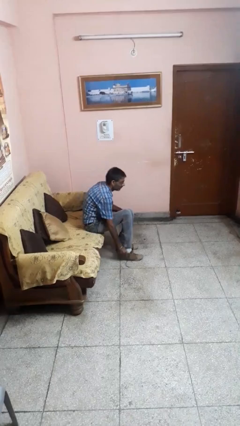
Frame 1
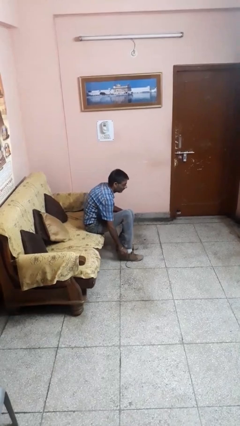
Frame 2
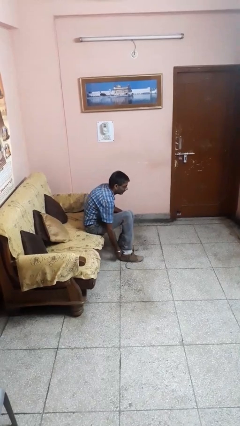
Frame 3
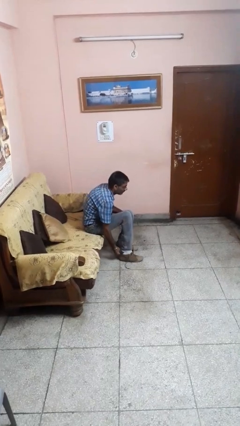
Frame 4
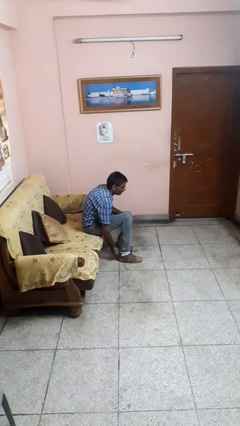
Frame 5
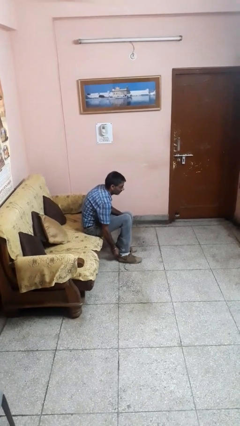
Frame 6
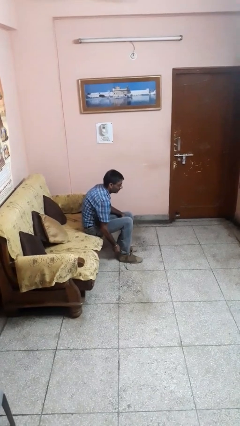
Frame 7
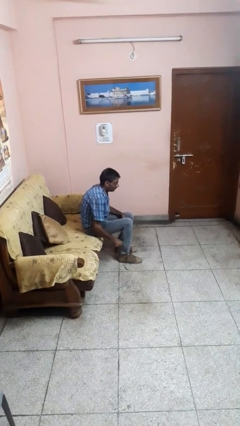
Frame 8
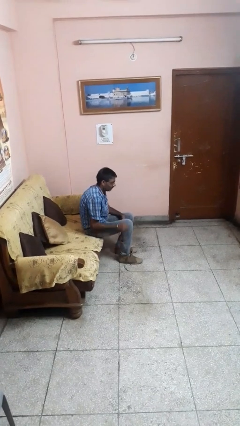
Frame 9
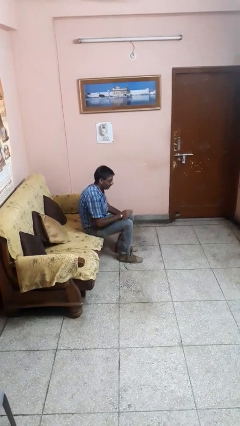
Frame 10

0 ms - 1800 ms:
person puts on shoes

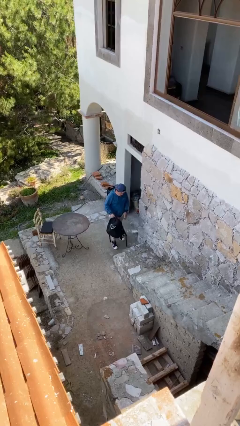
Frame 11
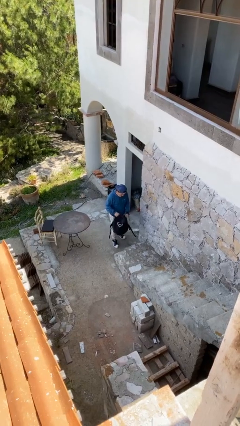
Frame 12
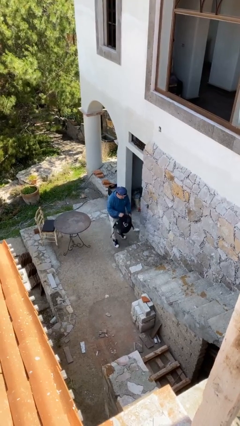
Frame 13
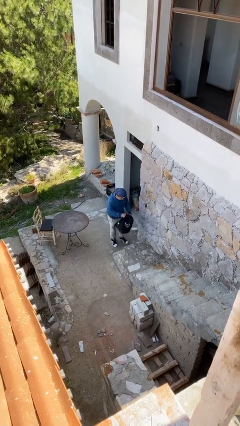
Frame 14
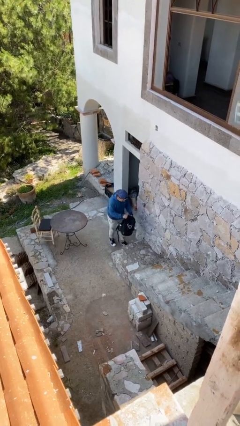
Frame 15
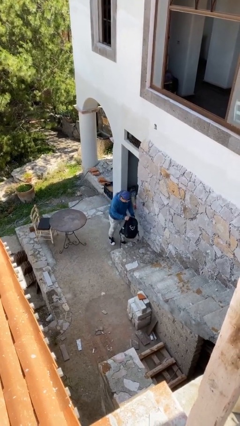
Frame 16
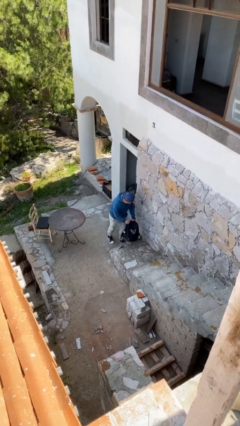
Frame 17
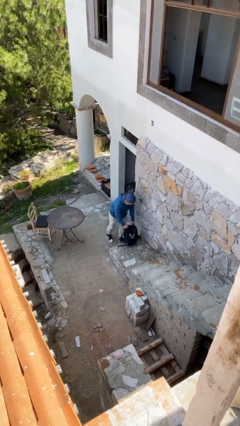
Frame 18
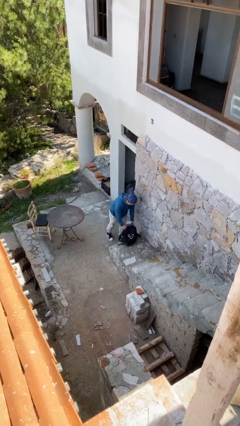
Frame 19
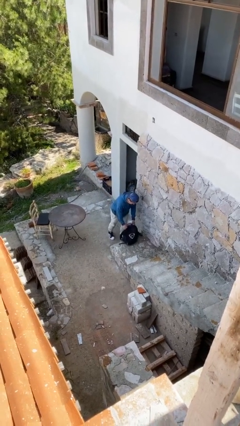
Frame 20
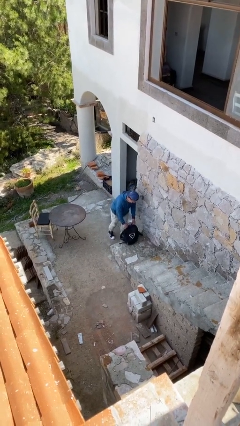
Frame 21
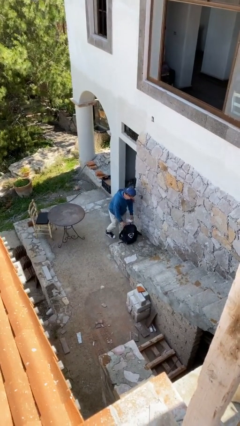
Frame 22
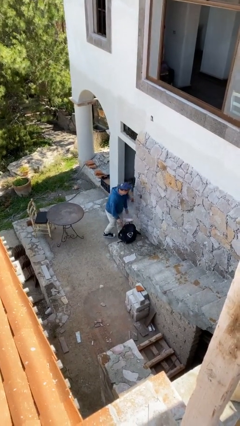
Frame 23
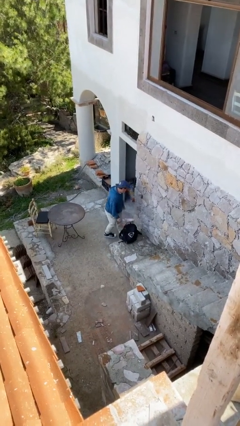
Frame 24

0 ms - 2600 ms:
person puts down object on floor

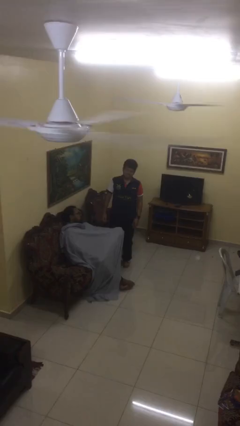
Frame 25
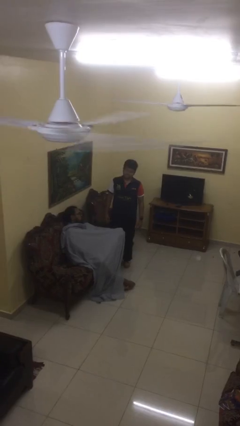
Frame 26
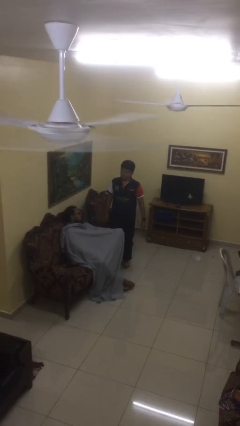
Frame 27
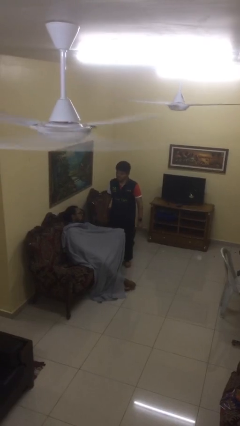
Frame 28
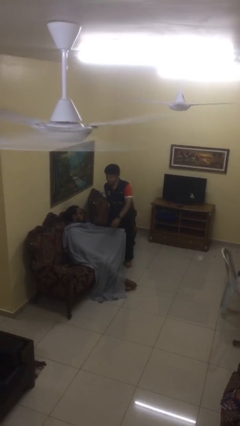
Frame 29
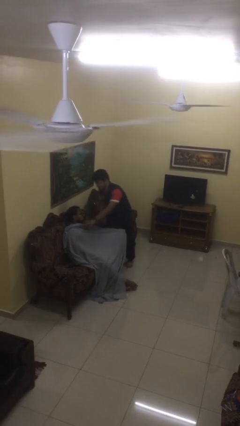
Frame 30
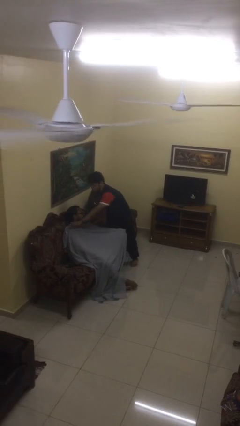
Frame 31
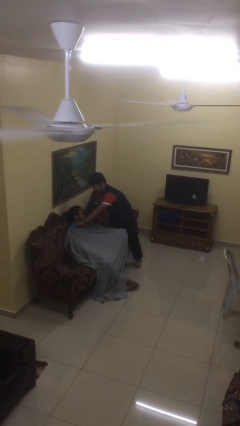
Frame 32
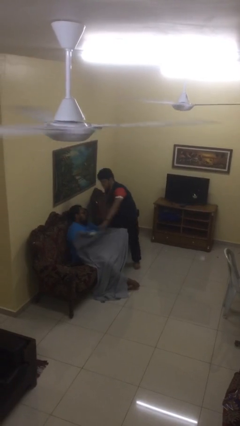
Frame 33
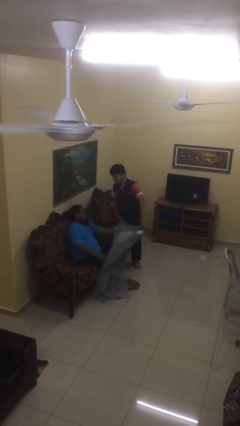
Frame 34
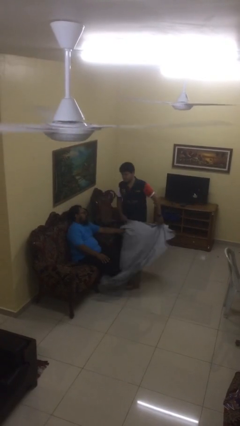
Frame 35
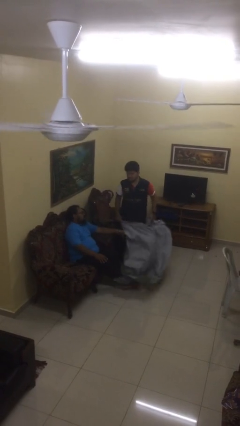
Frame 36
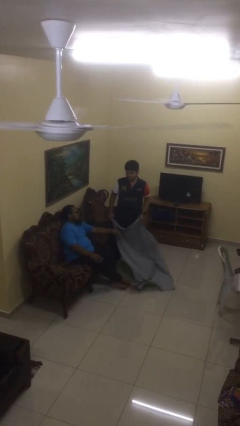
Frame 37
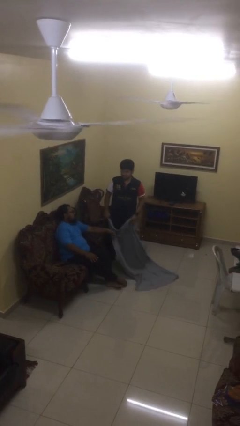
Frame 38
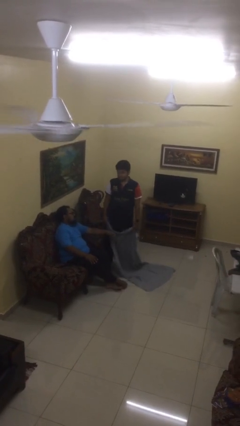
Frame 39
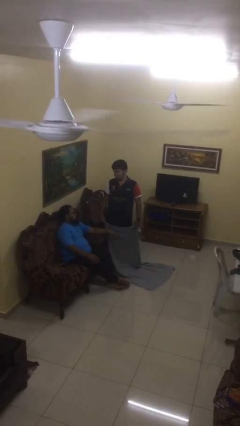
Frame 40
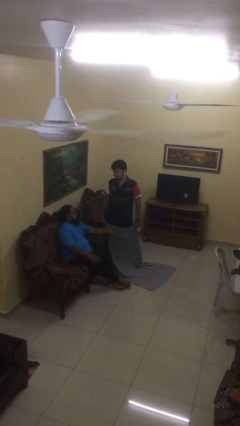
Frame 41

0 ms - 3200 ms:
person uncovers friend with blanket

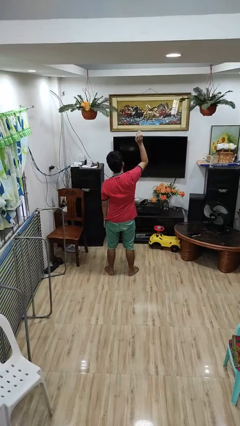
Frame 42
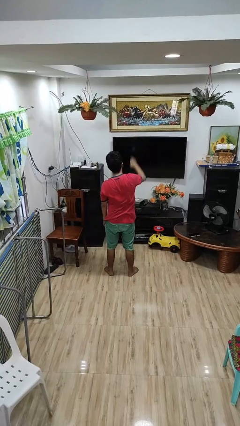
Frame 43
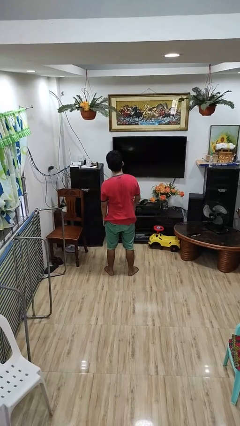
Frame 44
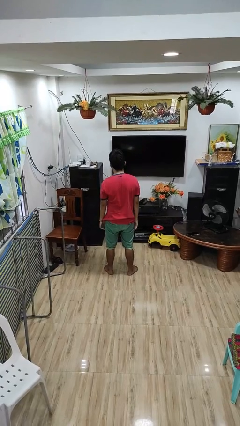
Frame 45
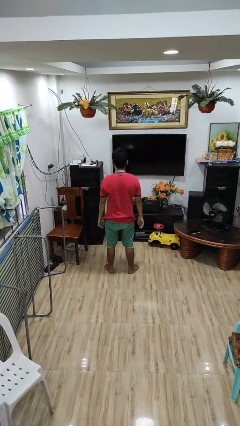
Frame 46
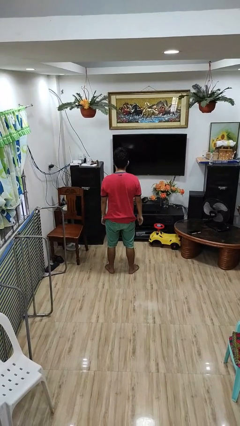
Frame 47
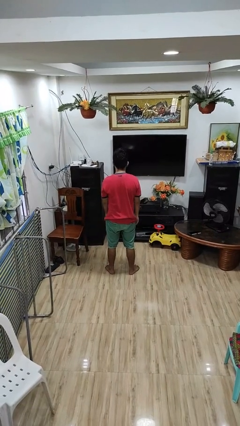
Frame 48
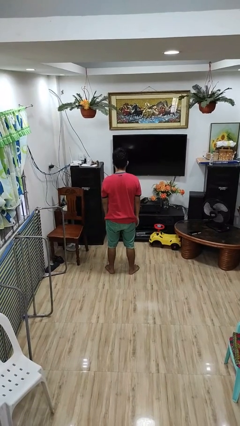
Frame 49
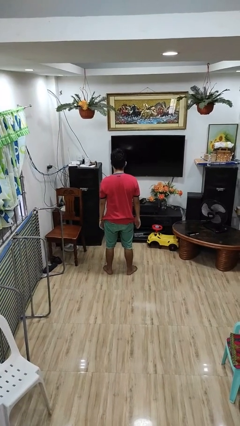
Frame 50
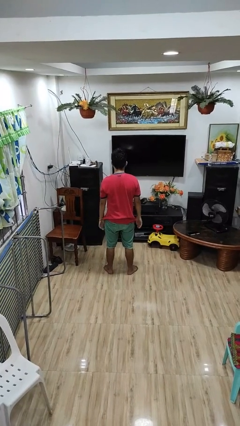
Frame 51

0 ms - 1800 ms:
person gestures swipe down

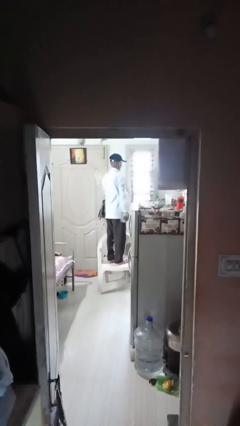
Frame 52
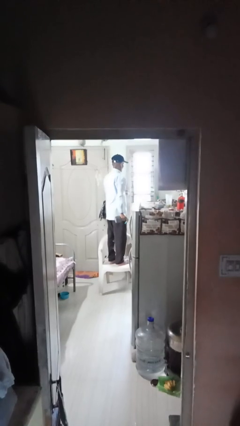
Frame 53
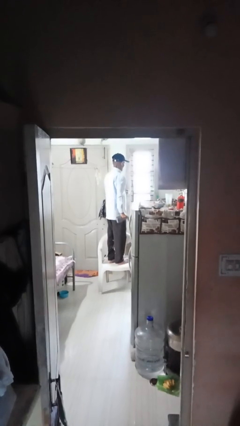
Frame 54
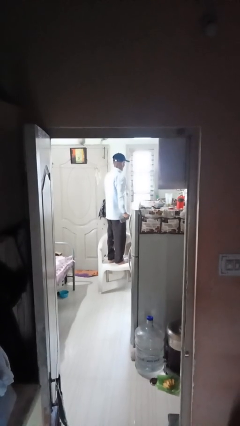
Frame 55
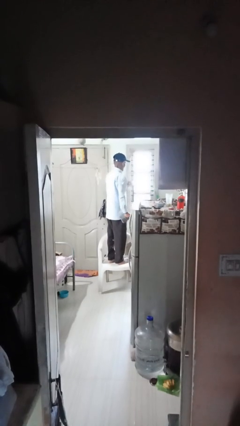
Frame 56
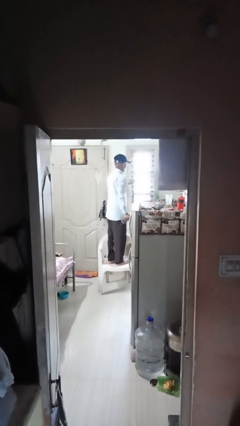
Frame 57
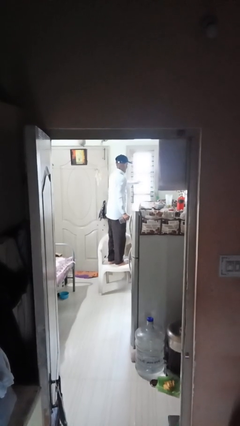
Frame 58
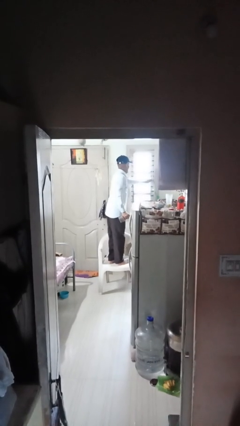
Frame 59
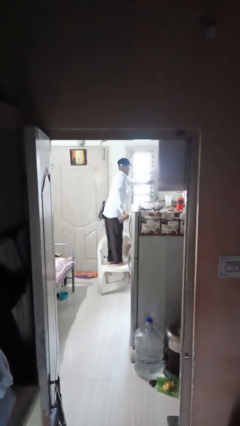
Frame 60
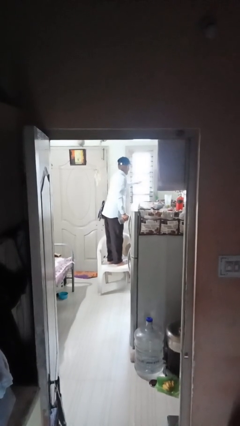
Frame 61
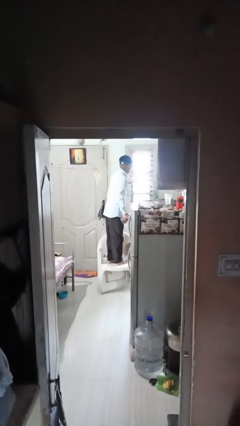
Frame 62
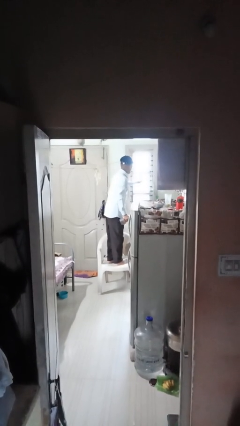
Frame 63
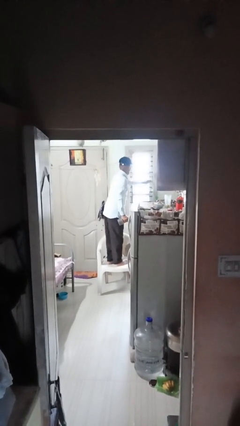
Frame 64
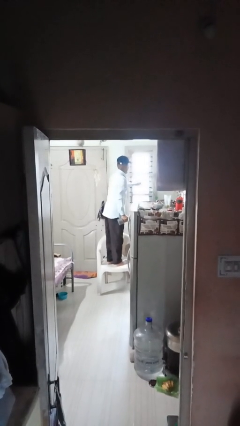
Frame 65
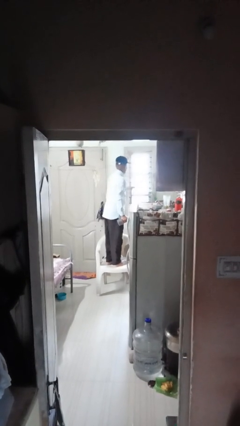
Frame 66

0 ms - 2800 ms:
person washes window

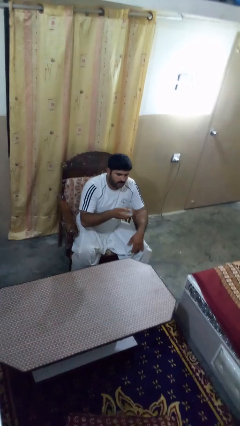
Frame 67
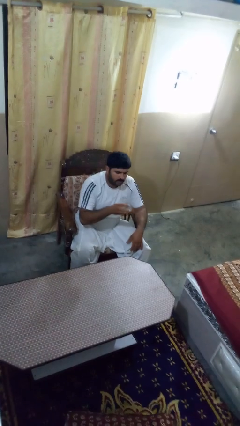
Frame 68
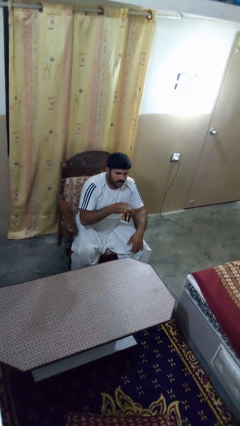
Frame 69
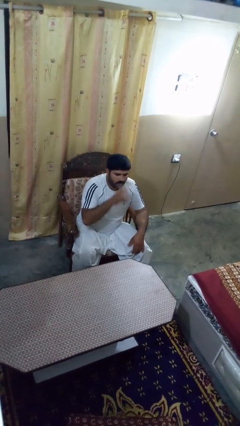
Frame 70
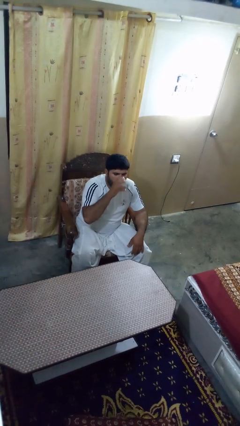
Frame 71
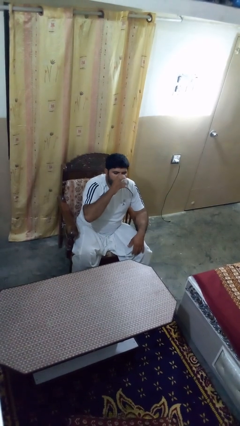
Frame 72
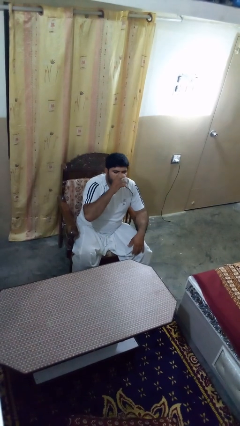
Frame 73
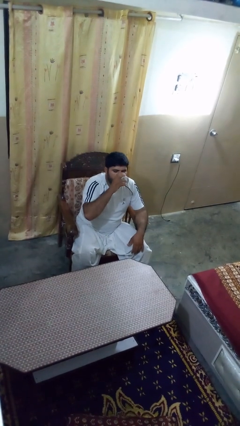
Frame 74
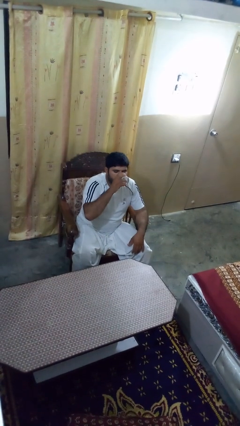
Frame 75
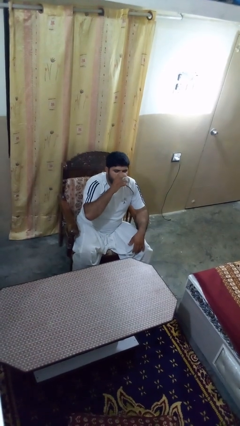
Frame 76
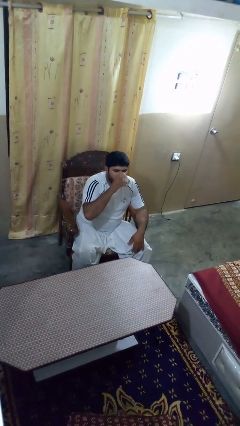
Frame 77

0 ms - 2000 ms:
person drinks from shotglass

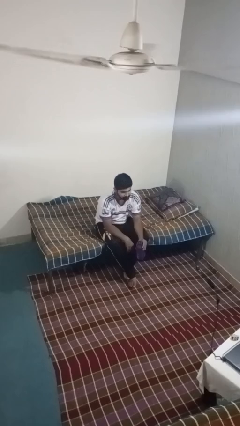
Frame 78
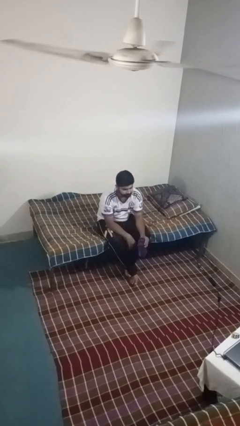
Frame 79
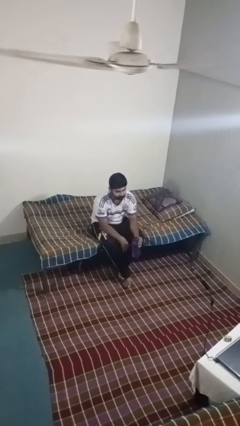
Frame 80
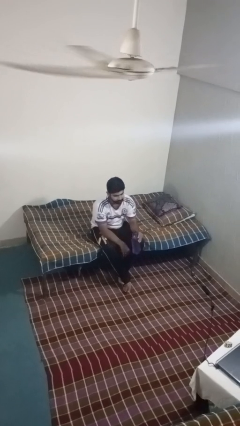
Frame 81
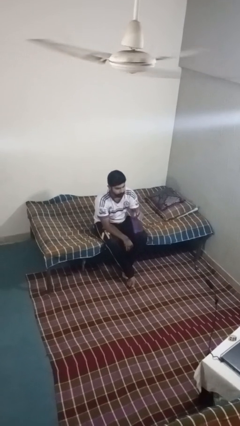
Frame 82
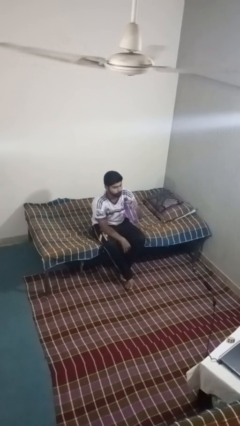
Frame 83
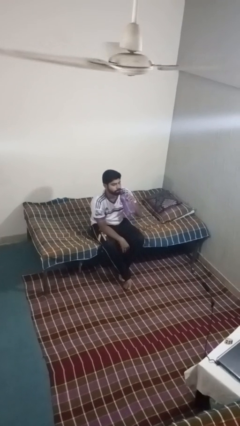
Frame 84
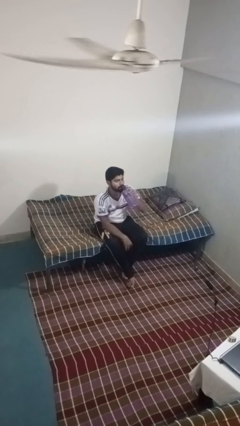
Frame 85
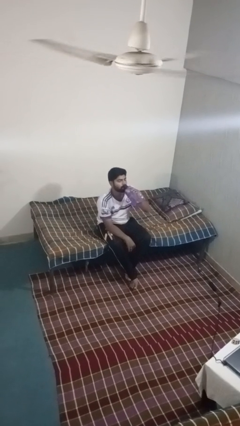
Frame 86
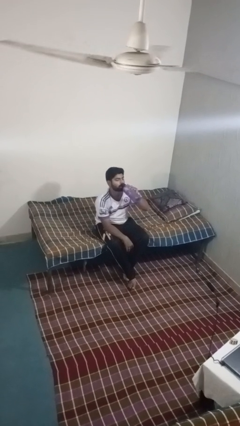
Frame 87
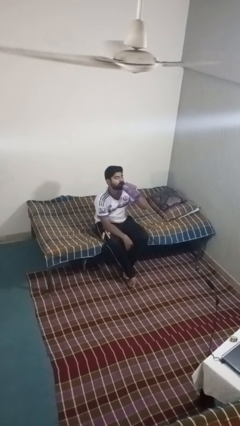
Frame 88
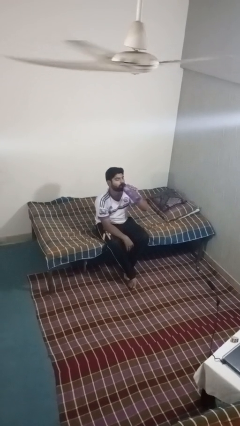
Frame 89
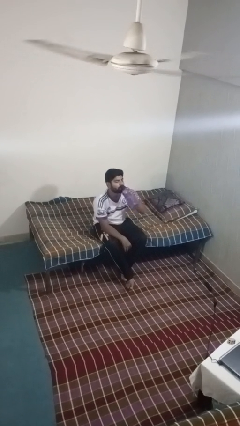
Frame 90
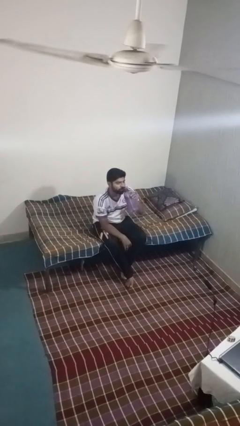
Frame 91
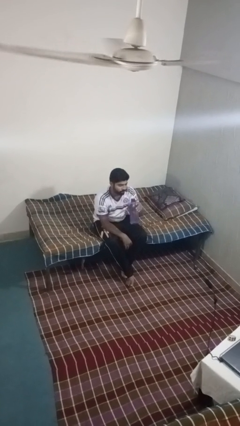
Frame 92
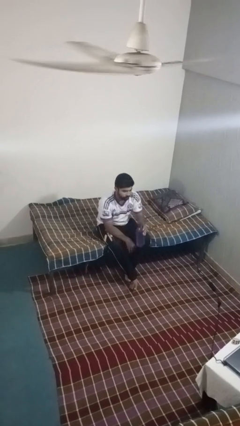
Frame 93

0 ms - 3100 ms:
person drinks from bottle
